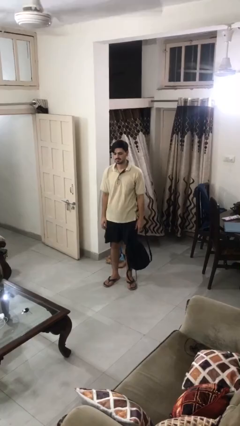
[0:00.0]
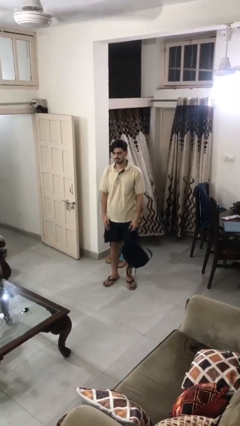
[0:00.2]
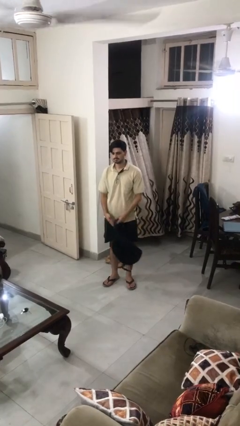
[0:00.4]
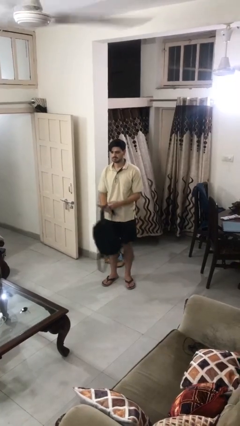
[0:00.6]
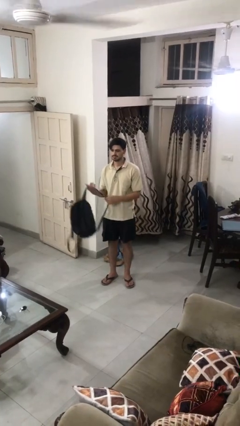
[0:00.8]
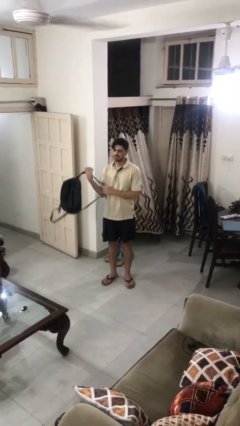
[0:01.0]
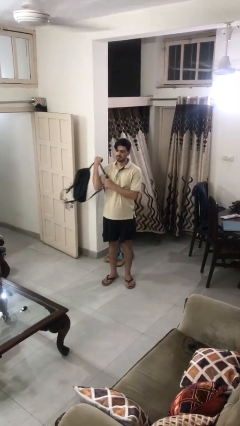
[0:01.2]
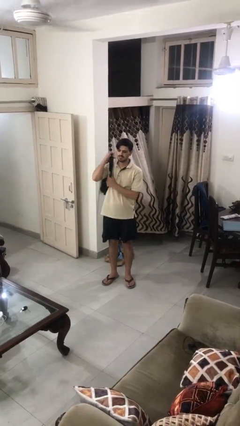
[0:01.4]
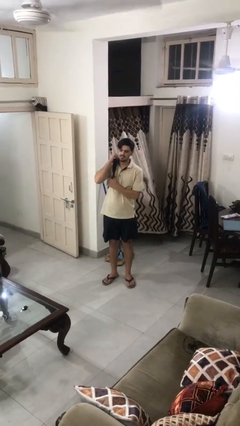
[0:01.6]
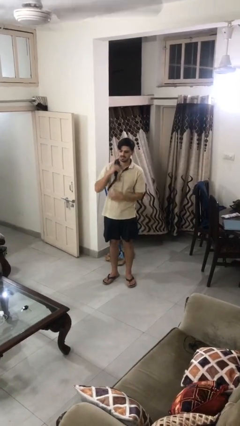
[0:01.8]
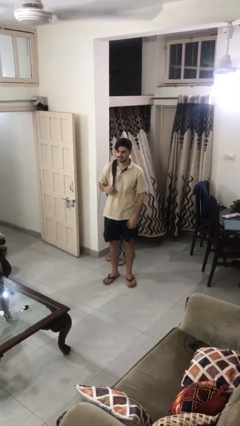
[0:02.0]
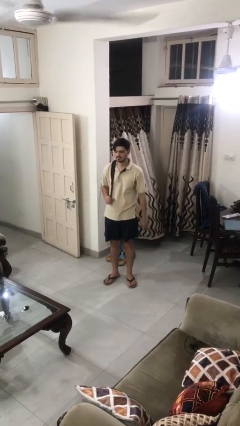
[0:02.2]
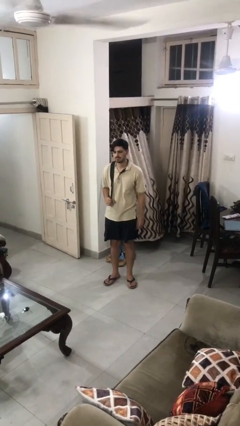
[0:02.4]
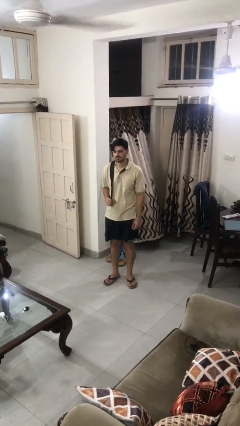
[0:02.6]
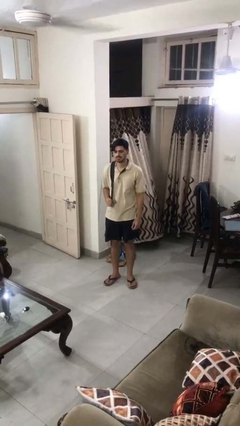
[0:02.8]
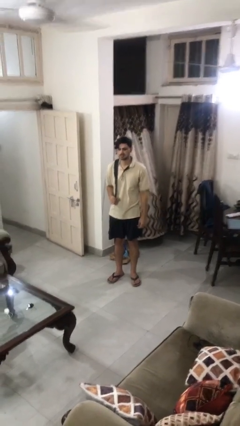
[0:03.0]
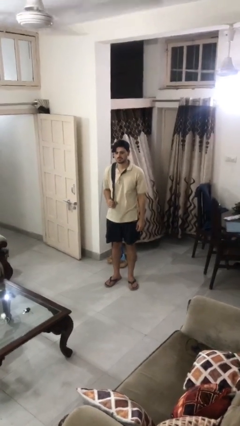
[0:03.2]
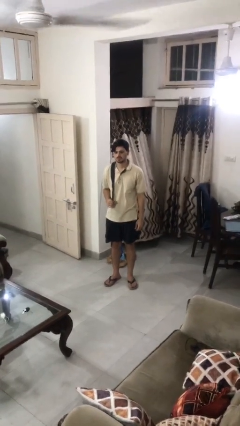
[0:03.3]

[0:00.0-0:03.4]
person puts on backpack

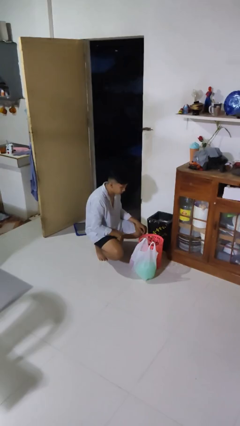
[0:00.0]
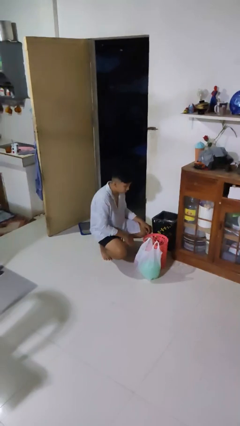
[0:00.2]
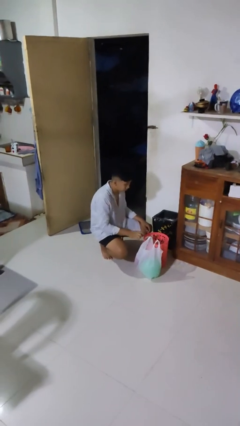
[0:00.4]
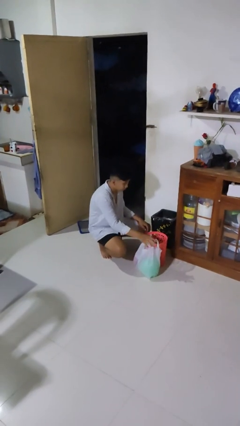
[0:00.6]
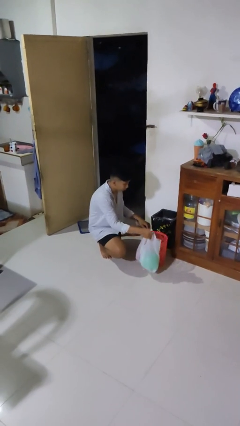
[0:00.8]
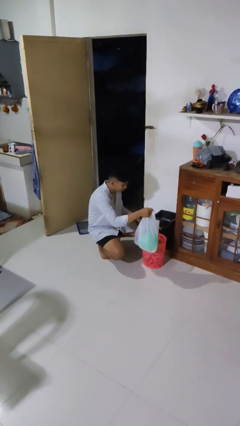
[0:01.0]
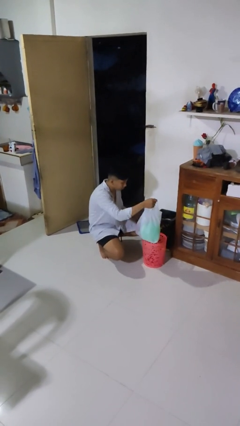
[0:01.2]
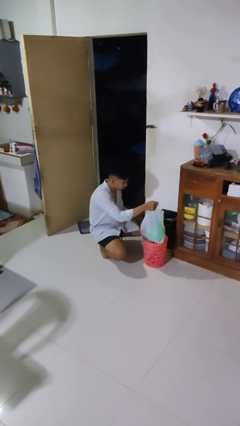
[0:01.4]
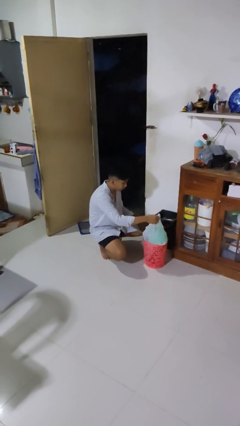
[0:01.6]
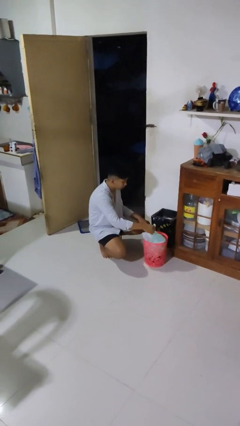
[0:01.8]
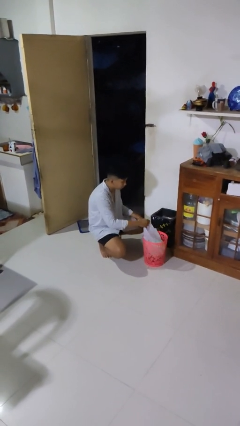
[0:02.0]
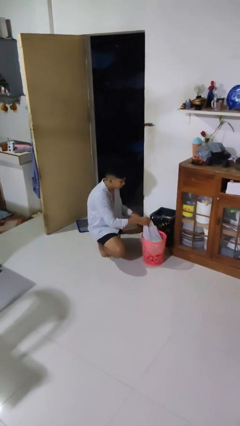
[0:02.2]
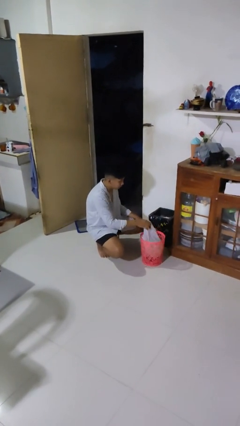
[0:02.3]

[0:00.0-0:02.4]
person inserts trashbag into trashcan

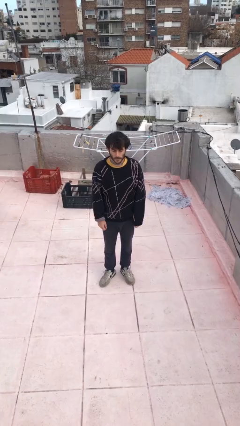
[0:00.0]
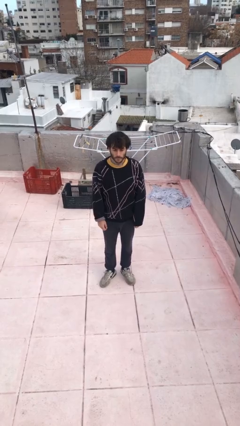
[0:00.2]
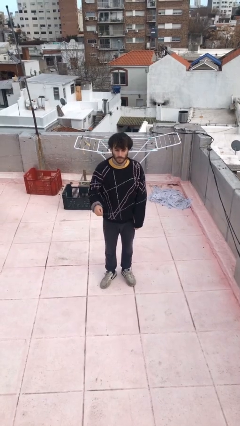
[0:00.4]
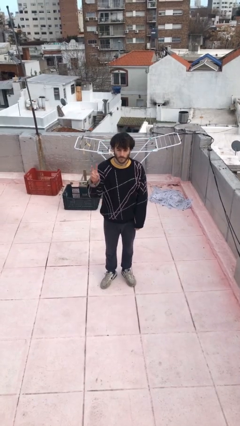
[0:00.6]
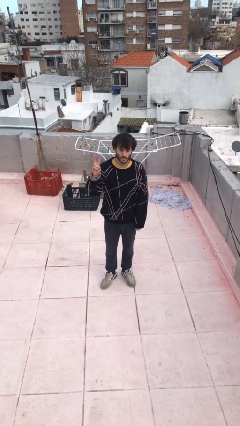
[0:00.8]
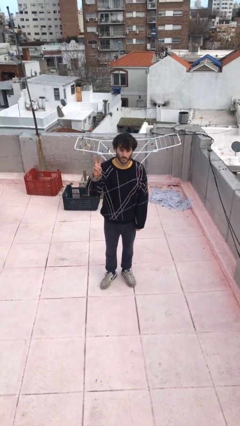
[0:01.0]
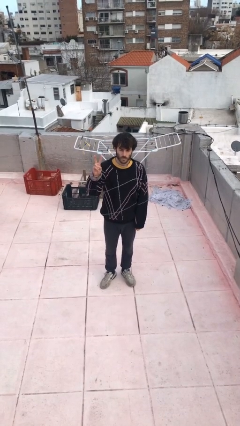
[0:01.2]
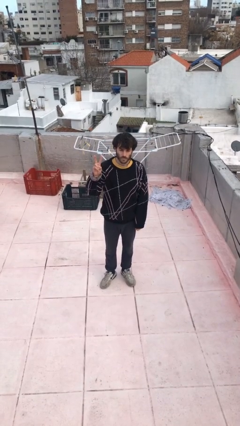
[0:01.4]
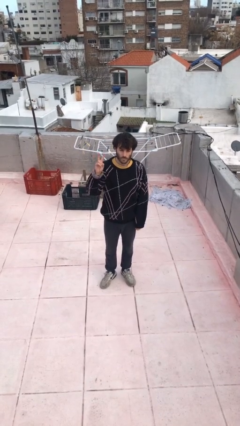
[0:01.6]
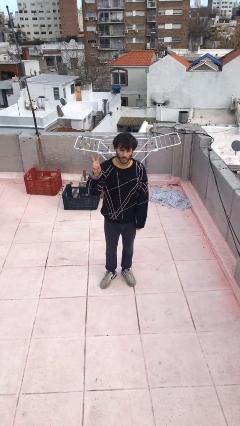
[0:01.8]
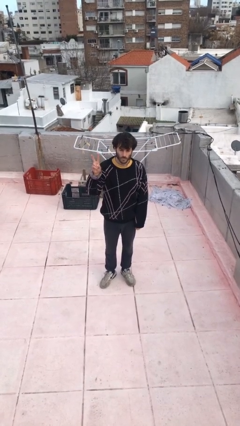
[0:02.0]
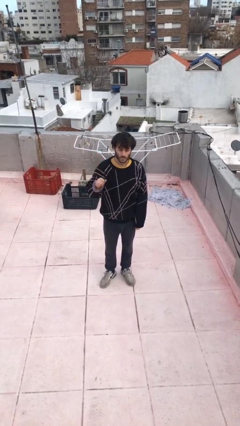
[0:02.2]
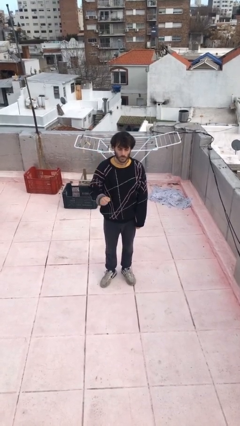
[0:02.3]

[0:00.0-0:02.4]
person gestures peace

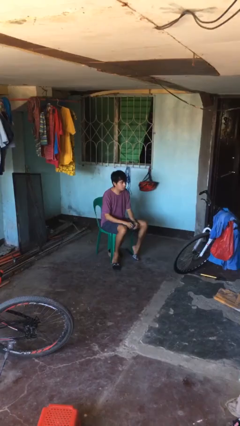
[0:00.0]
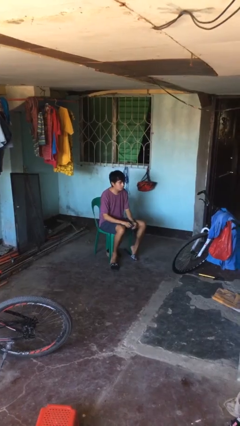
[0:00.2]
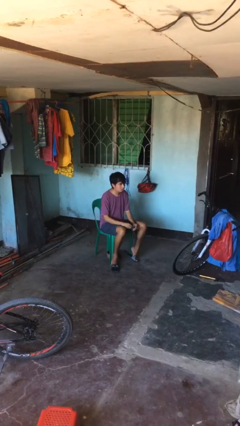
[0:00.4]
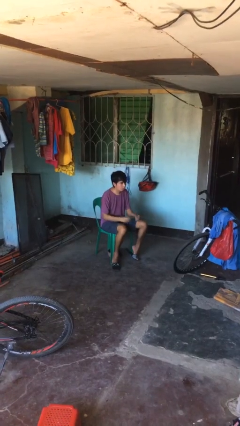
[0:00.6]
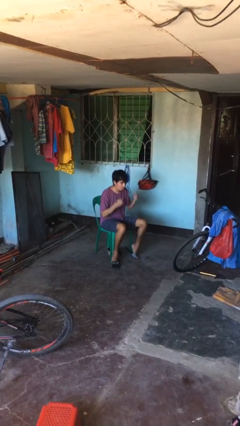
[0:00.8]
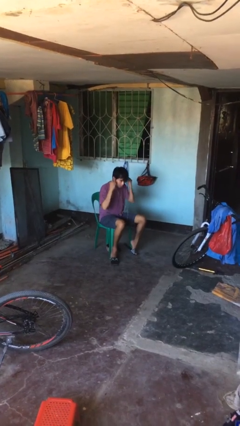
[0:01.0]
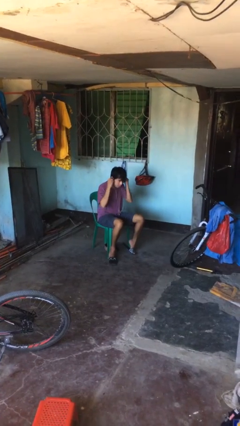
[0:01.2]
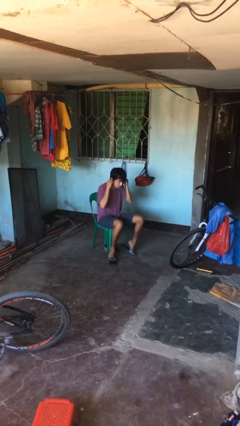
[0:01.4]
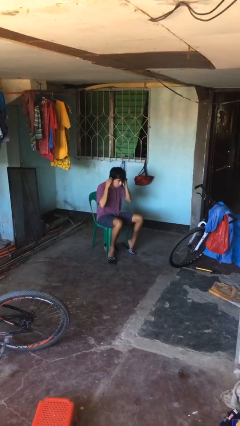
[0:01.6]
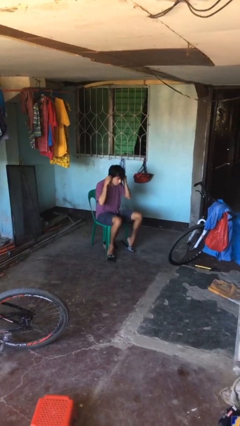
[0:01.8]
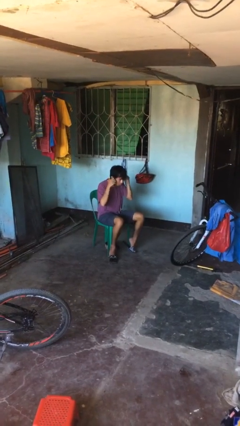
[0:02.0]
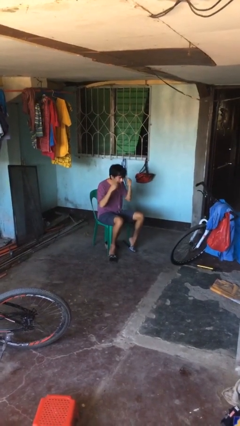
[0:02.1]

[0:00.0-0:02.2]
person puts on headphones

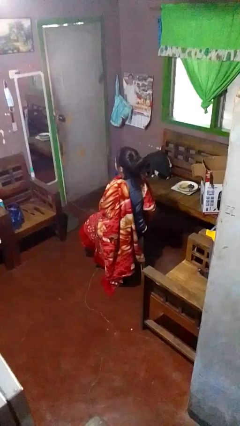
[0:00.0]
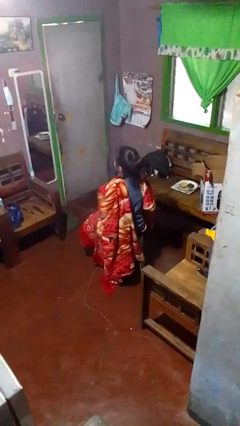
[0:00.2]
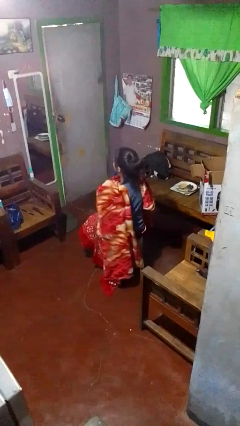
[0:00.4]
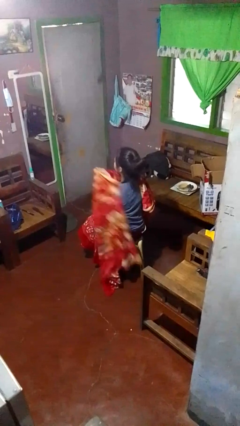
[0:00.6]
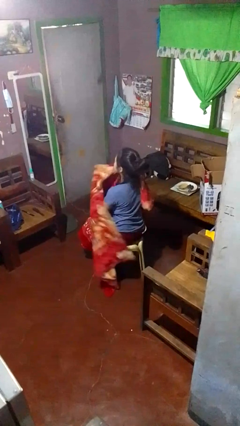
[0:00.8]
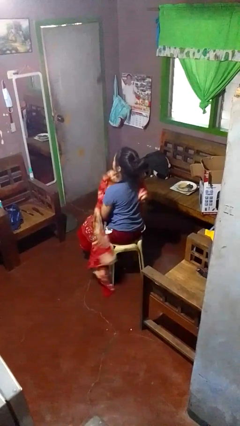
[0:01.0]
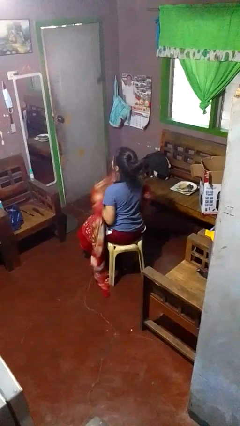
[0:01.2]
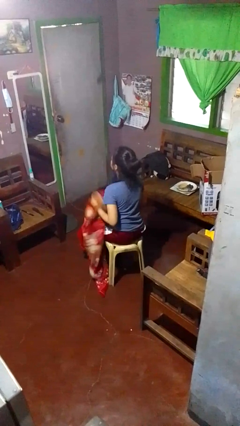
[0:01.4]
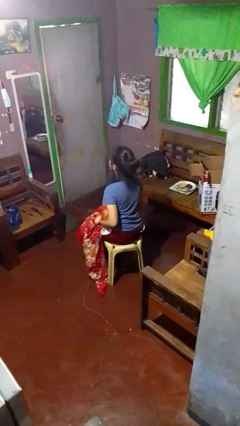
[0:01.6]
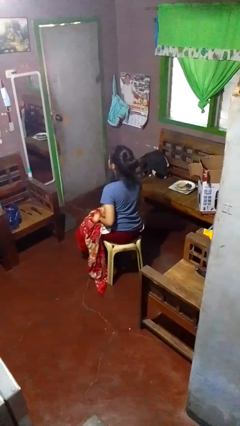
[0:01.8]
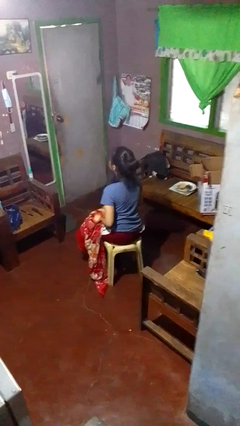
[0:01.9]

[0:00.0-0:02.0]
person uncovers with blanket

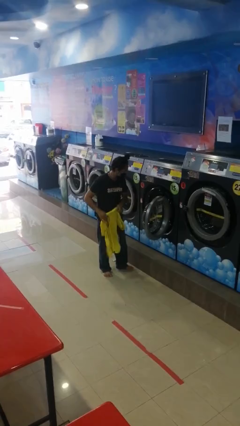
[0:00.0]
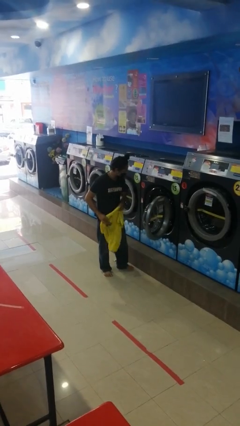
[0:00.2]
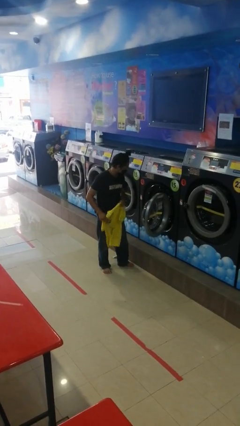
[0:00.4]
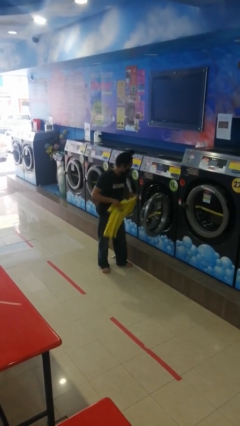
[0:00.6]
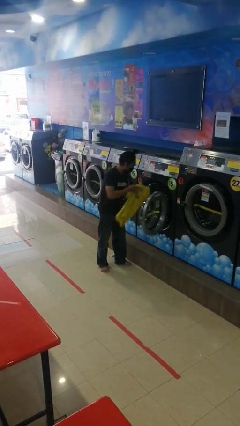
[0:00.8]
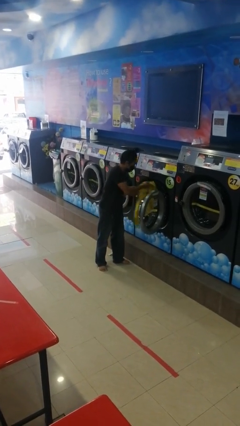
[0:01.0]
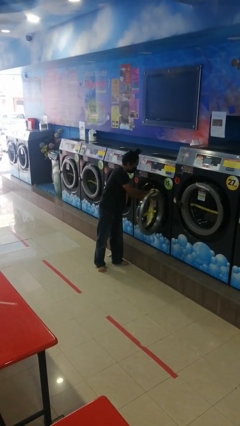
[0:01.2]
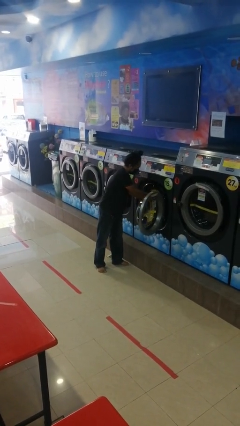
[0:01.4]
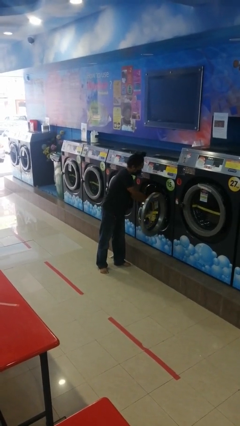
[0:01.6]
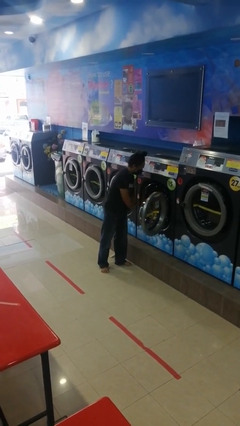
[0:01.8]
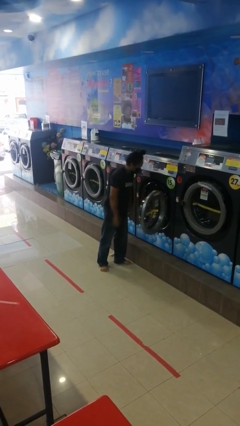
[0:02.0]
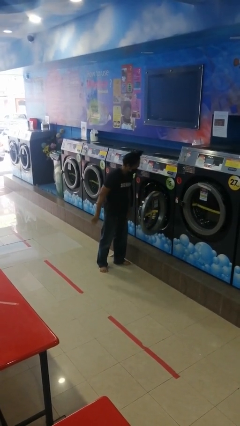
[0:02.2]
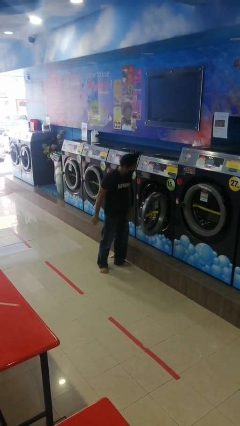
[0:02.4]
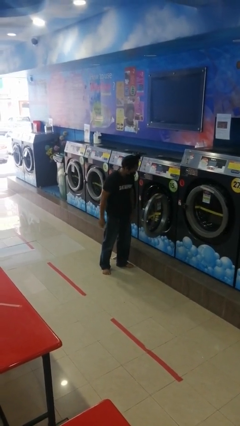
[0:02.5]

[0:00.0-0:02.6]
person loads clotheswasher

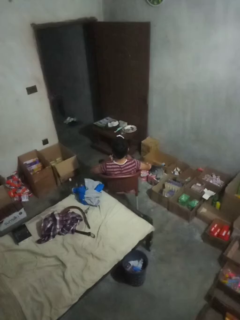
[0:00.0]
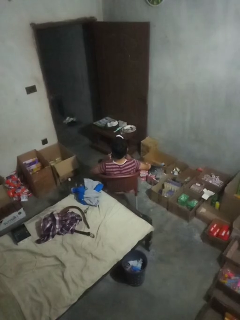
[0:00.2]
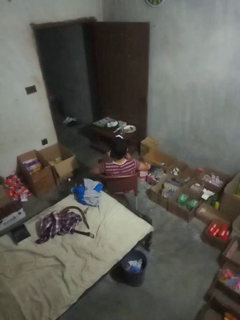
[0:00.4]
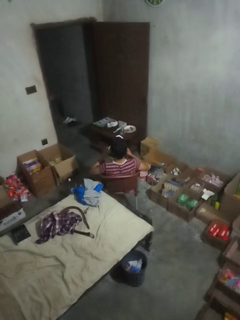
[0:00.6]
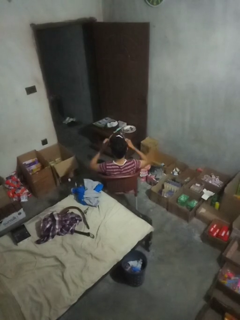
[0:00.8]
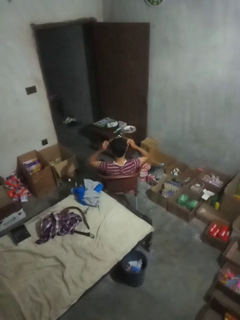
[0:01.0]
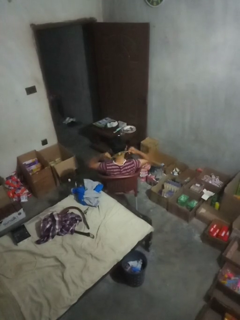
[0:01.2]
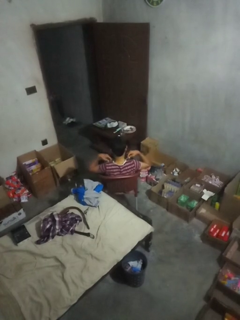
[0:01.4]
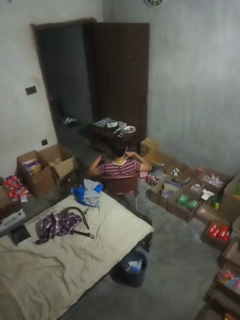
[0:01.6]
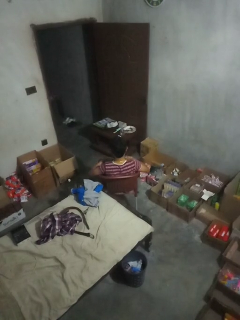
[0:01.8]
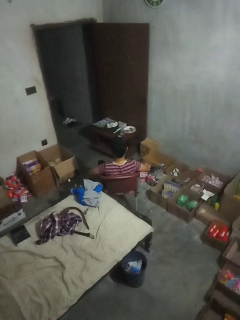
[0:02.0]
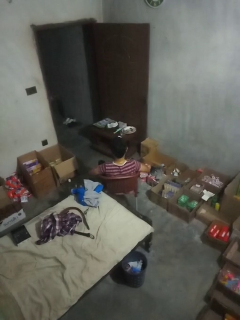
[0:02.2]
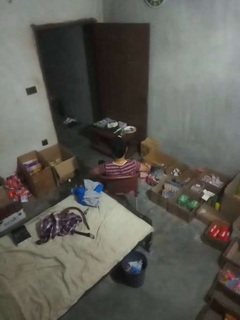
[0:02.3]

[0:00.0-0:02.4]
person puts on necklace

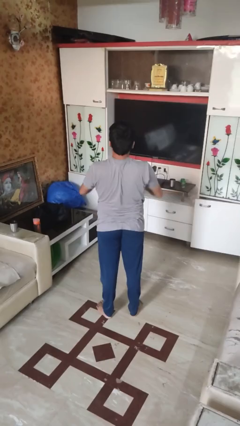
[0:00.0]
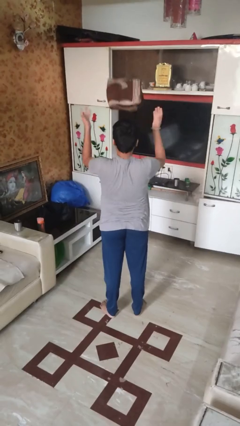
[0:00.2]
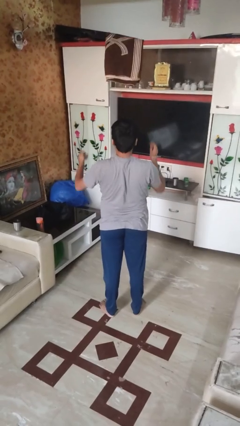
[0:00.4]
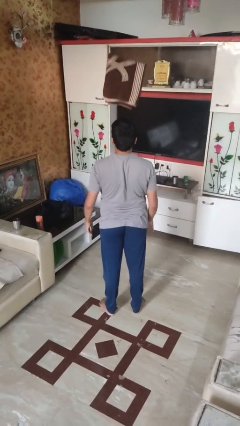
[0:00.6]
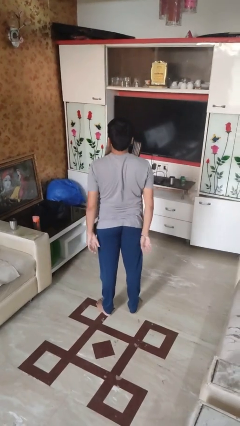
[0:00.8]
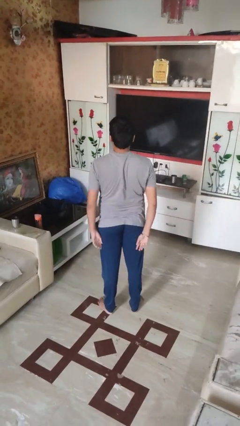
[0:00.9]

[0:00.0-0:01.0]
person throws object into air
